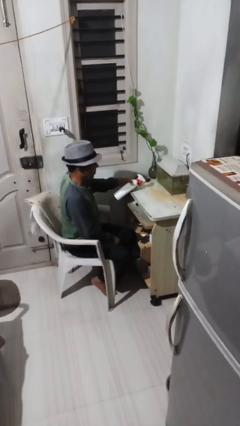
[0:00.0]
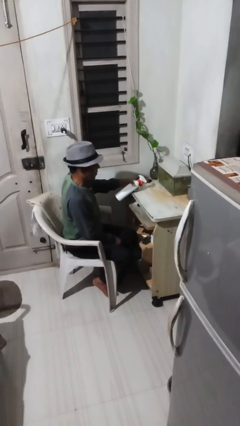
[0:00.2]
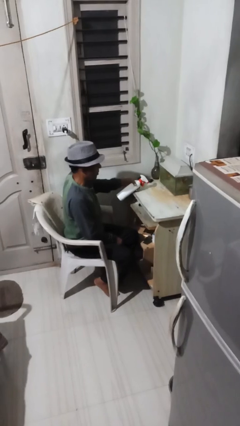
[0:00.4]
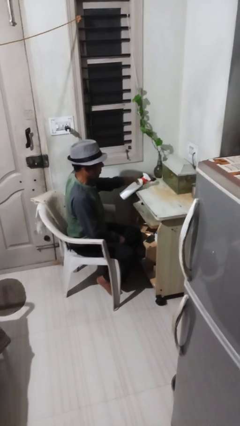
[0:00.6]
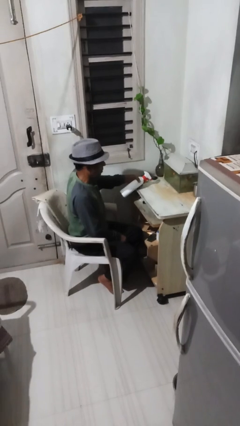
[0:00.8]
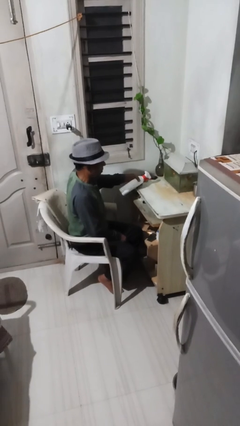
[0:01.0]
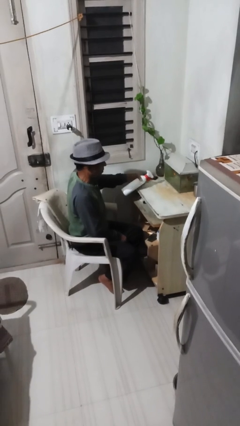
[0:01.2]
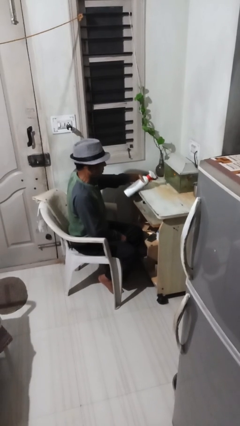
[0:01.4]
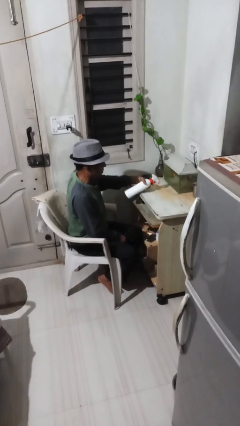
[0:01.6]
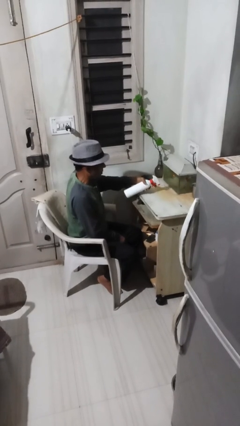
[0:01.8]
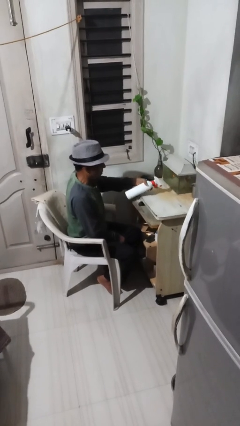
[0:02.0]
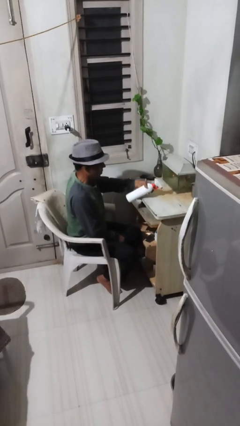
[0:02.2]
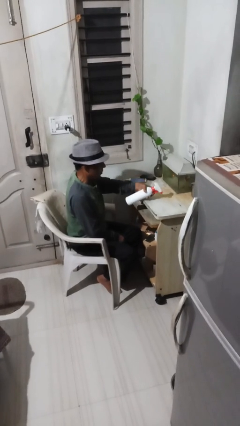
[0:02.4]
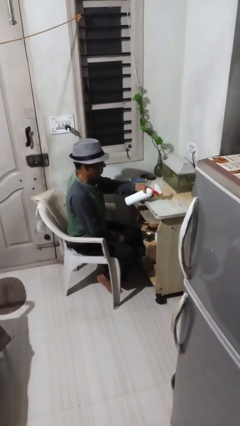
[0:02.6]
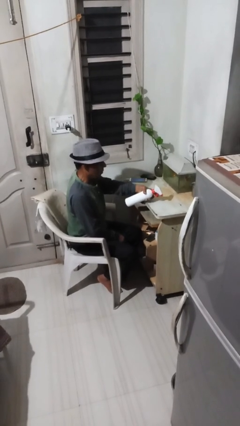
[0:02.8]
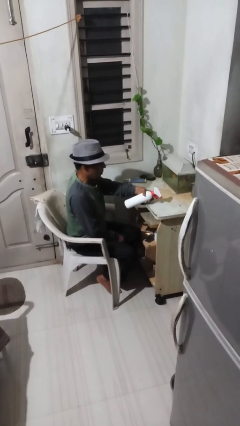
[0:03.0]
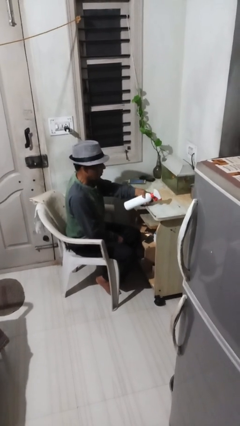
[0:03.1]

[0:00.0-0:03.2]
person sprays from bottle

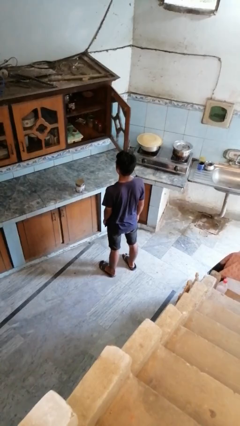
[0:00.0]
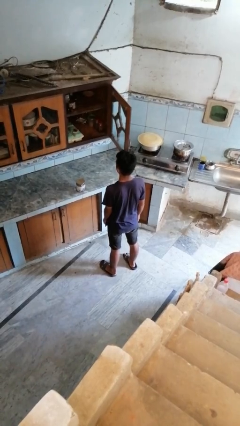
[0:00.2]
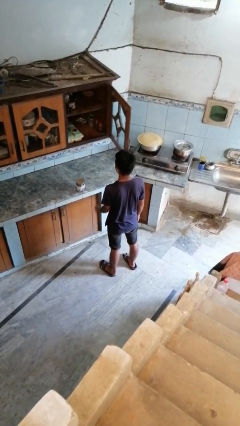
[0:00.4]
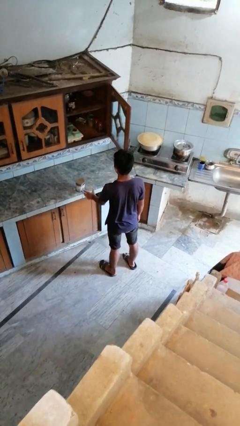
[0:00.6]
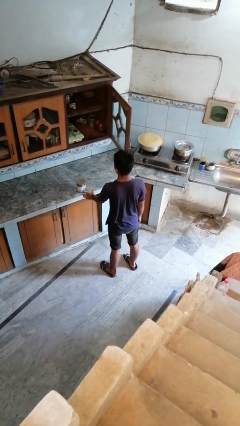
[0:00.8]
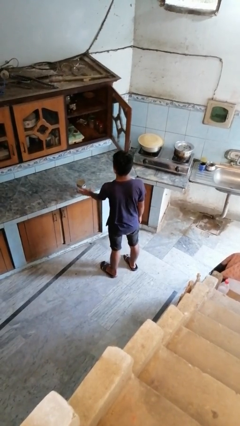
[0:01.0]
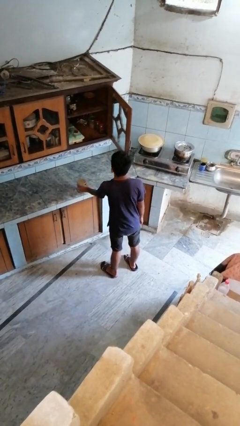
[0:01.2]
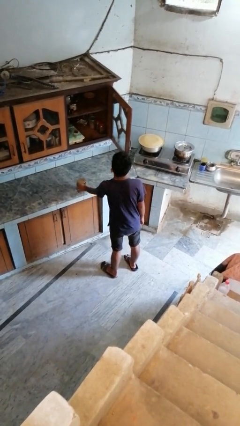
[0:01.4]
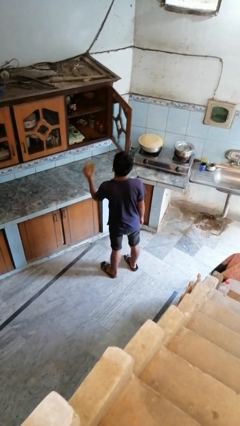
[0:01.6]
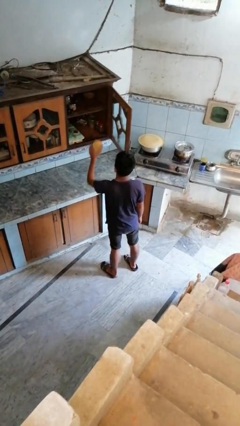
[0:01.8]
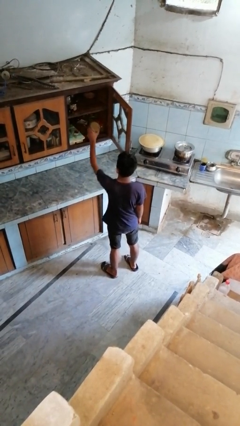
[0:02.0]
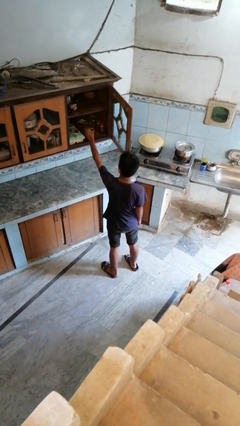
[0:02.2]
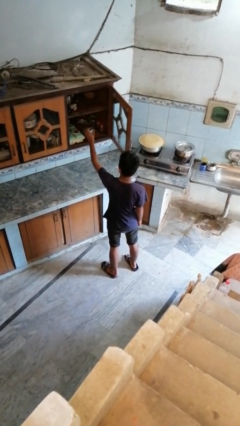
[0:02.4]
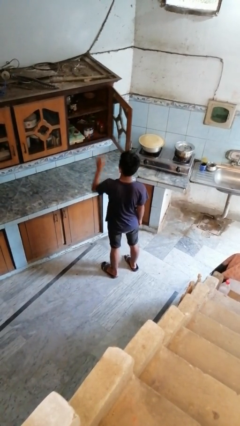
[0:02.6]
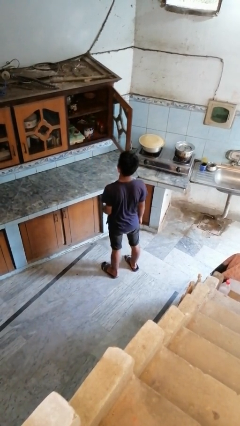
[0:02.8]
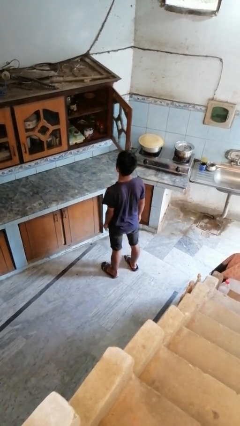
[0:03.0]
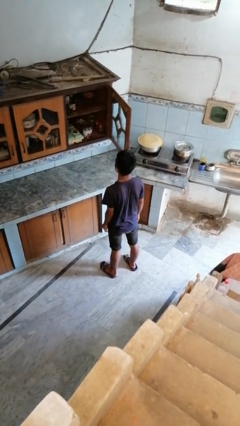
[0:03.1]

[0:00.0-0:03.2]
person puts object in cabinet

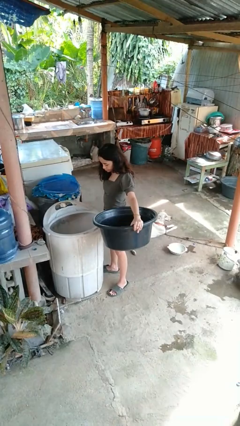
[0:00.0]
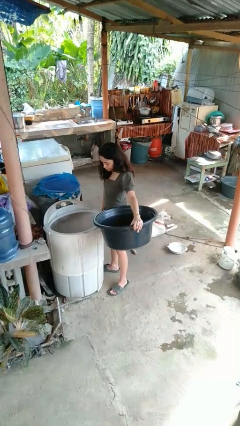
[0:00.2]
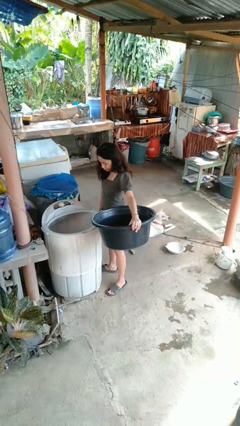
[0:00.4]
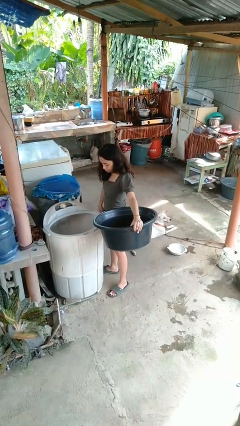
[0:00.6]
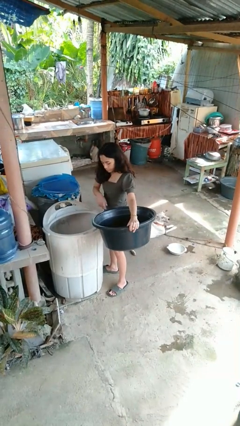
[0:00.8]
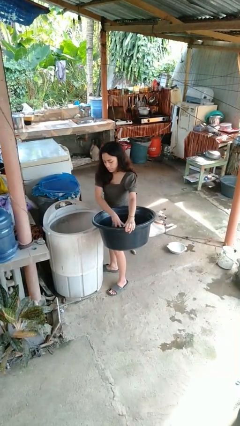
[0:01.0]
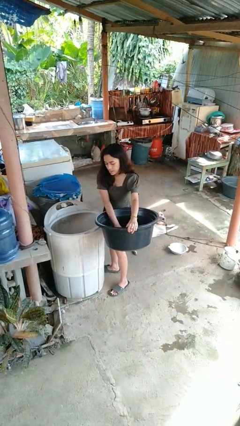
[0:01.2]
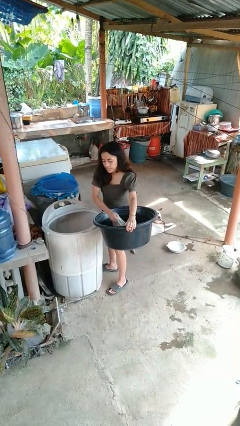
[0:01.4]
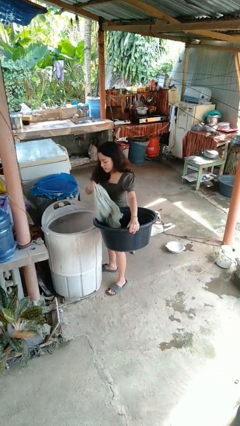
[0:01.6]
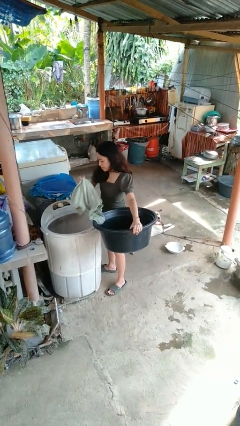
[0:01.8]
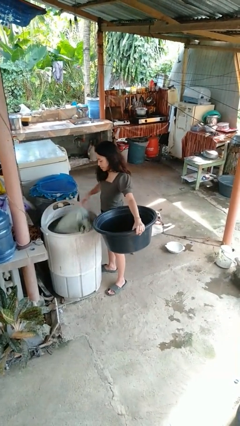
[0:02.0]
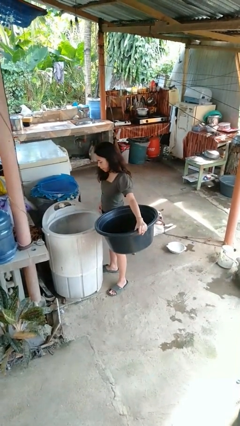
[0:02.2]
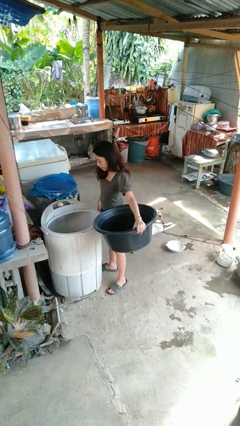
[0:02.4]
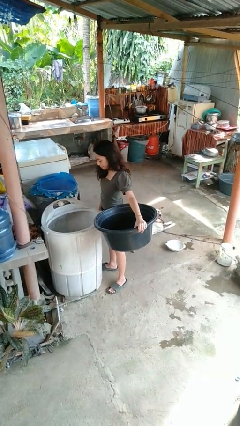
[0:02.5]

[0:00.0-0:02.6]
person loads clotheswasher

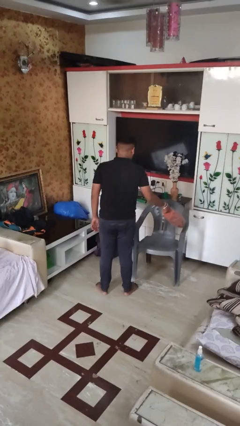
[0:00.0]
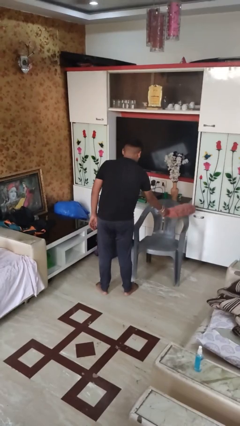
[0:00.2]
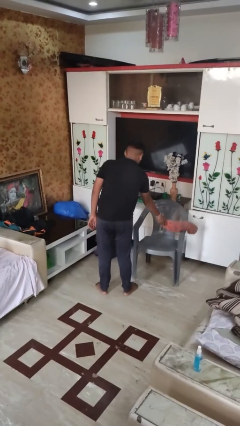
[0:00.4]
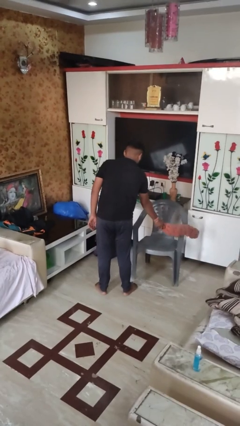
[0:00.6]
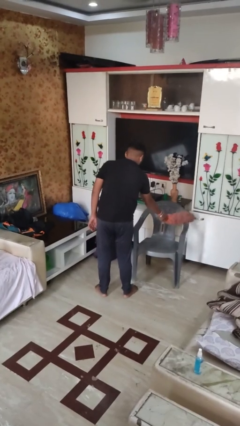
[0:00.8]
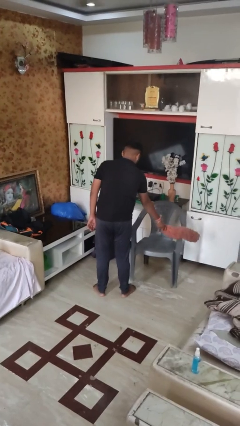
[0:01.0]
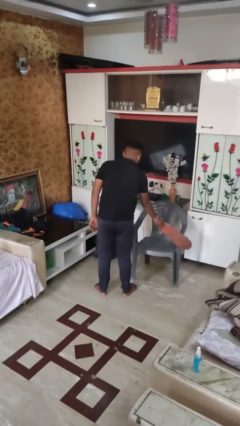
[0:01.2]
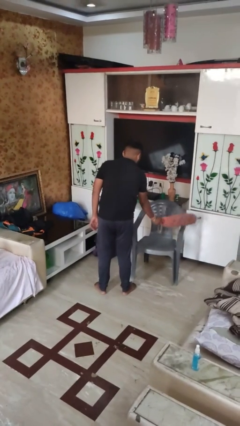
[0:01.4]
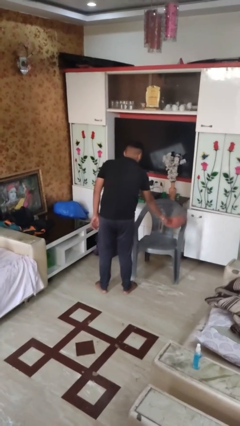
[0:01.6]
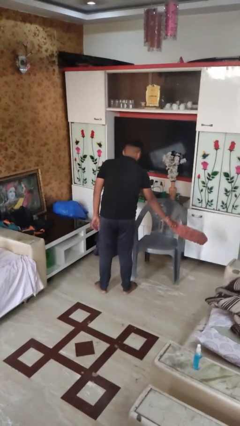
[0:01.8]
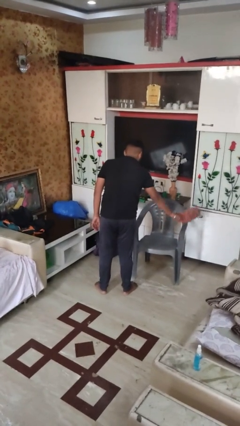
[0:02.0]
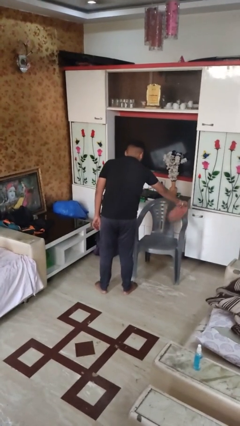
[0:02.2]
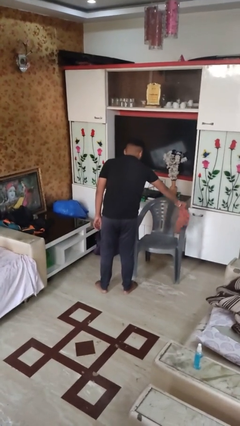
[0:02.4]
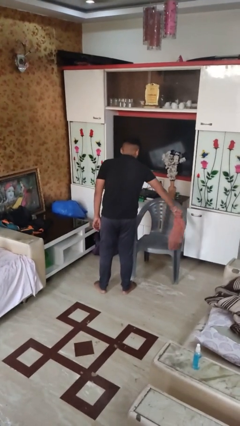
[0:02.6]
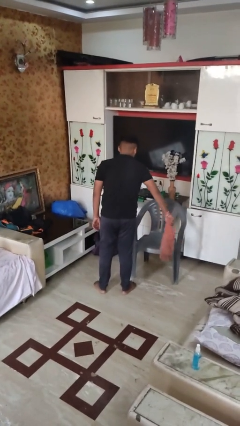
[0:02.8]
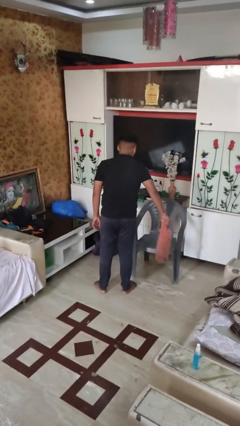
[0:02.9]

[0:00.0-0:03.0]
person dusts furniture

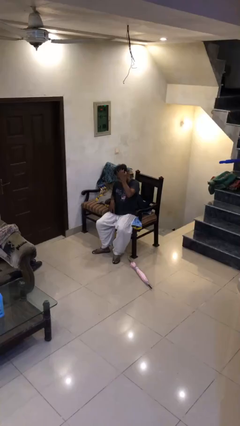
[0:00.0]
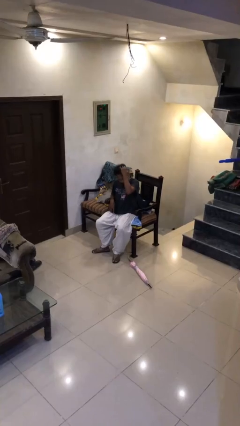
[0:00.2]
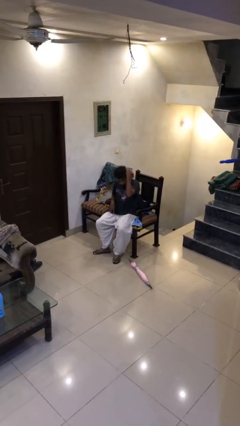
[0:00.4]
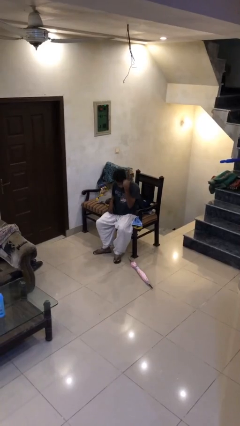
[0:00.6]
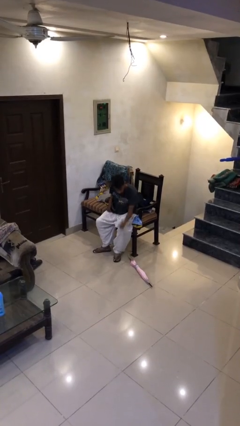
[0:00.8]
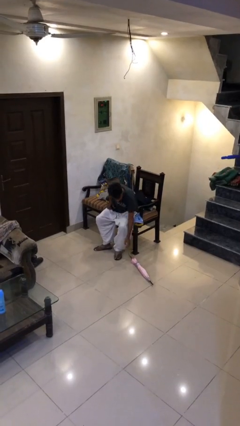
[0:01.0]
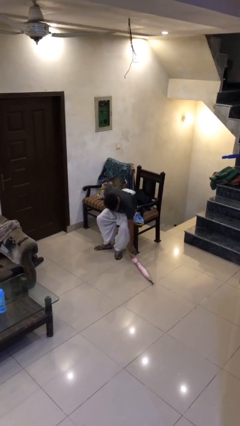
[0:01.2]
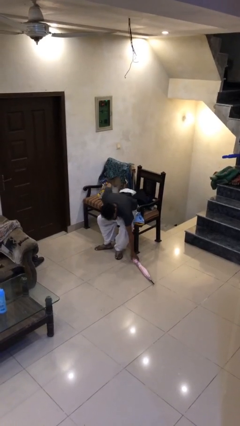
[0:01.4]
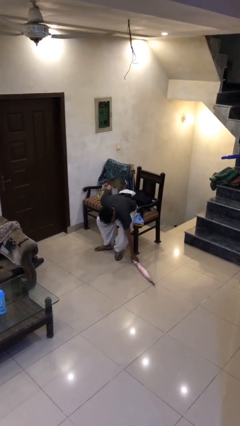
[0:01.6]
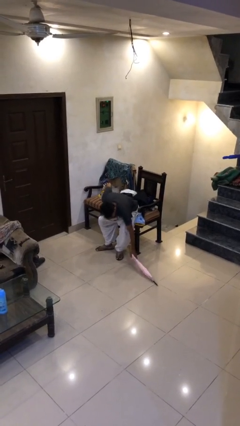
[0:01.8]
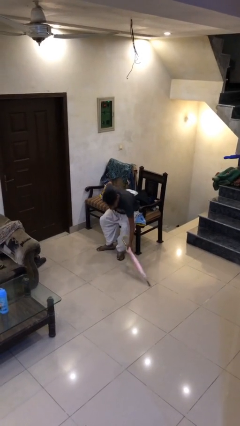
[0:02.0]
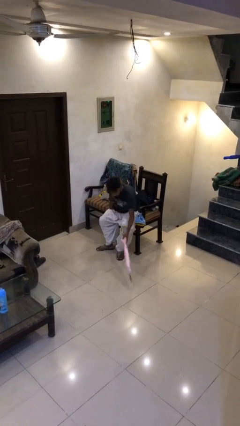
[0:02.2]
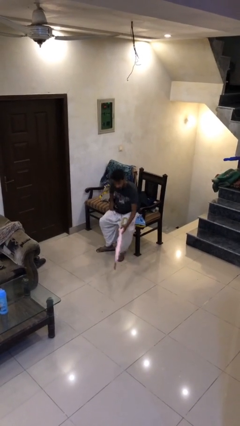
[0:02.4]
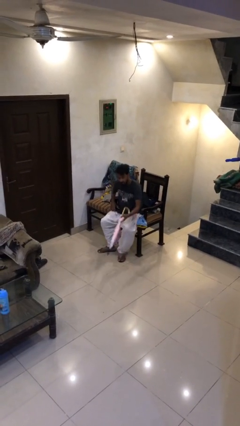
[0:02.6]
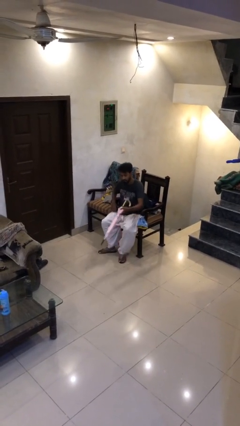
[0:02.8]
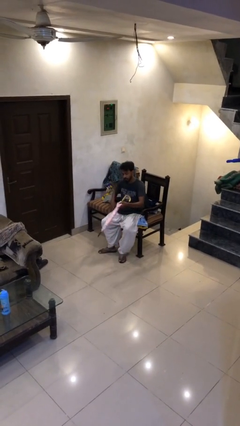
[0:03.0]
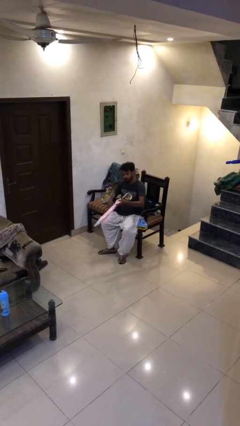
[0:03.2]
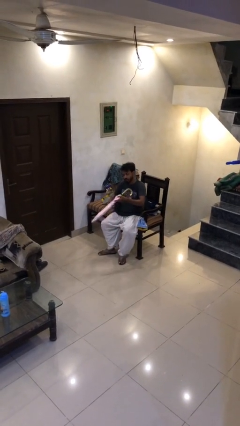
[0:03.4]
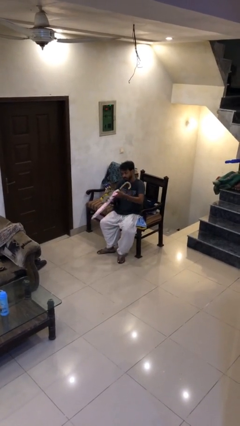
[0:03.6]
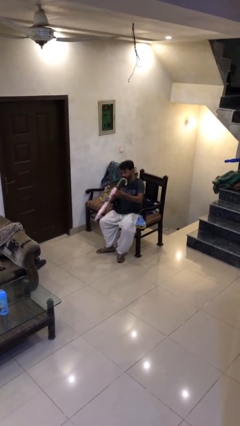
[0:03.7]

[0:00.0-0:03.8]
person picks up object from floor

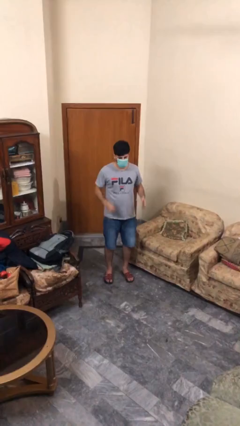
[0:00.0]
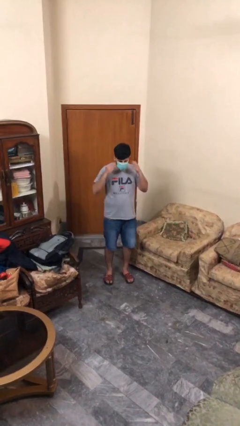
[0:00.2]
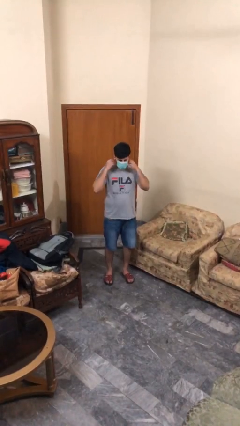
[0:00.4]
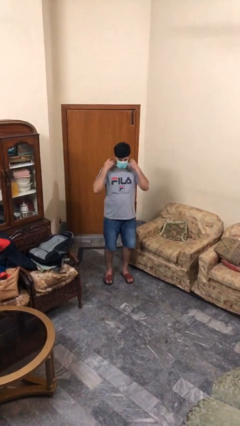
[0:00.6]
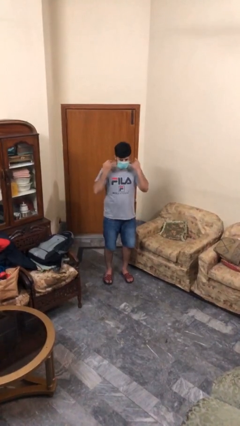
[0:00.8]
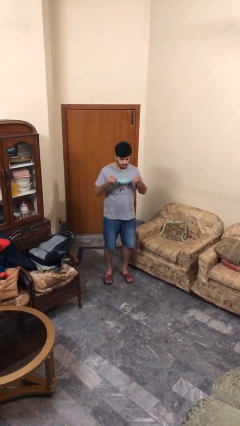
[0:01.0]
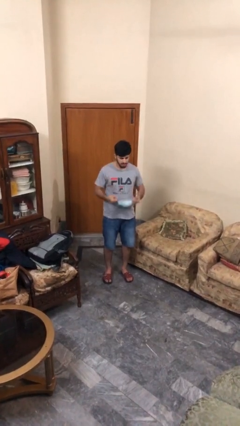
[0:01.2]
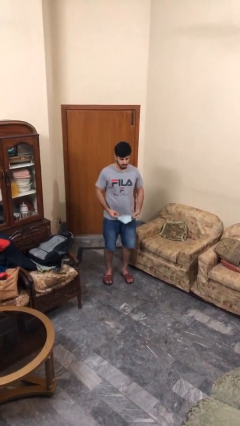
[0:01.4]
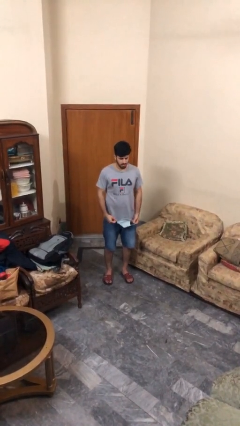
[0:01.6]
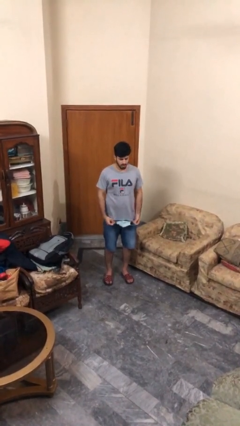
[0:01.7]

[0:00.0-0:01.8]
person takes off facemask
